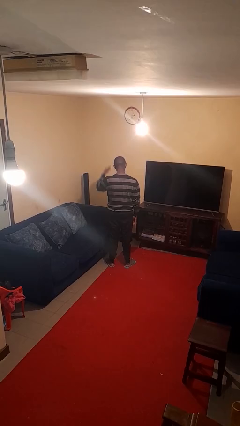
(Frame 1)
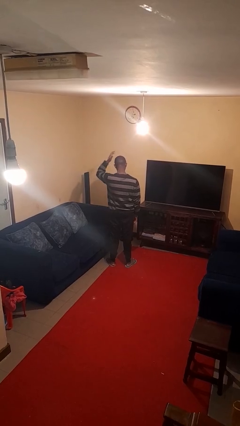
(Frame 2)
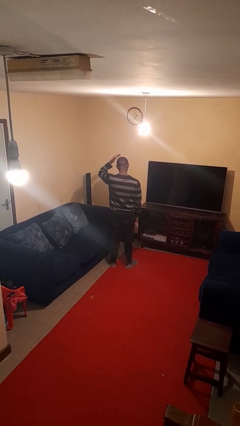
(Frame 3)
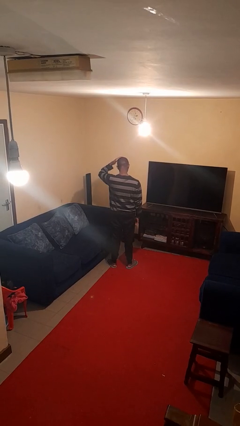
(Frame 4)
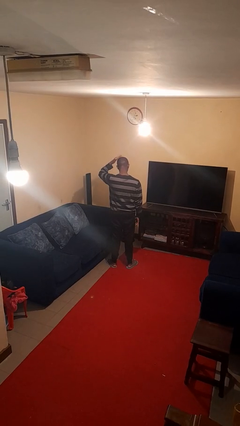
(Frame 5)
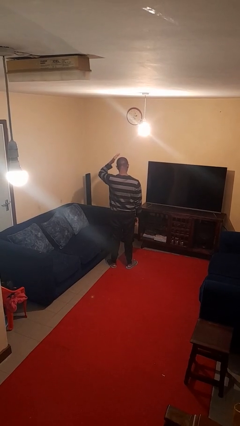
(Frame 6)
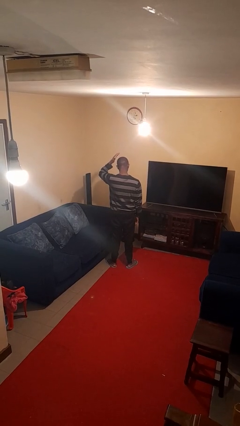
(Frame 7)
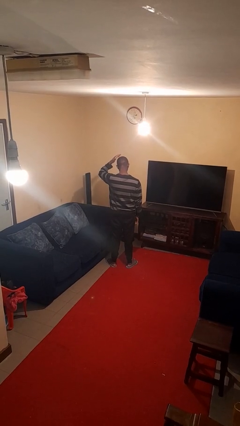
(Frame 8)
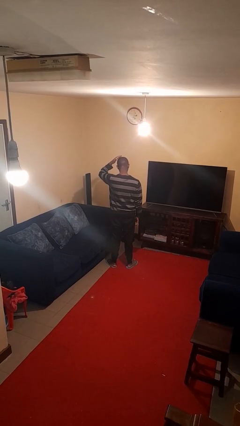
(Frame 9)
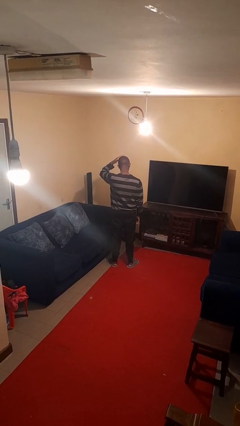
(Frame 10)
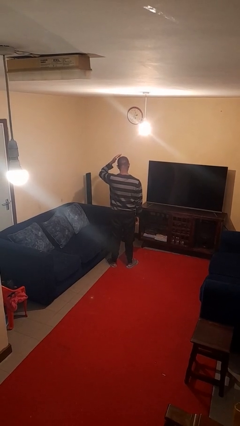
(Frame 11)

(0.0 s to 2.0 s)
person pats head

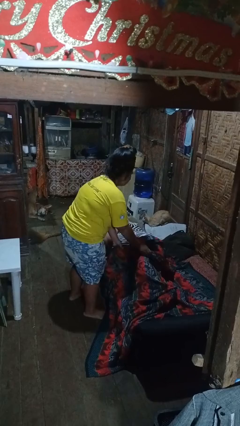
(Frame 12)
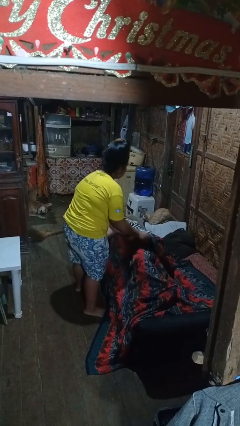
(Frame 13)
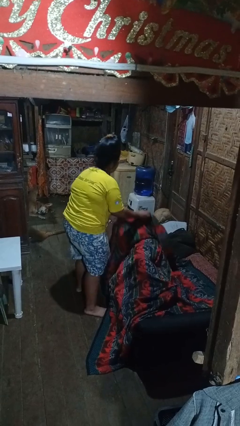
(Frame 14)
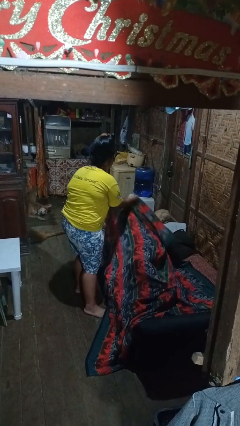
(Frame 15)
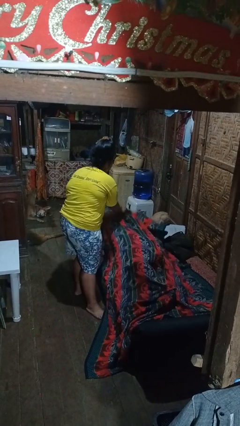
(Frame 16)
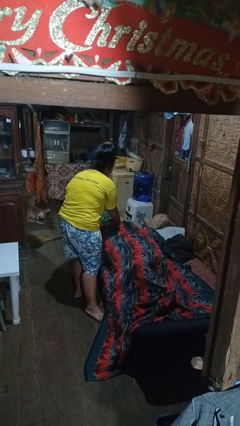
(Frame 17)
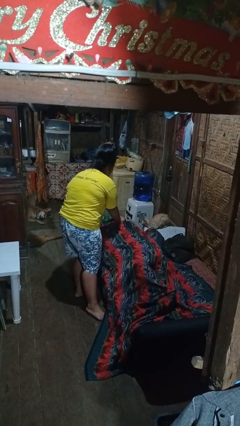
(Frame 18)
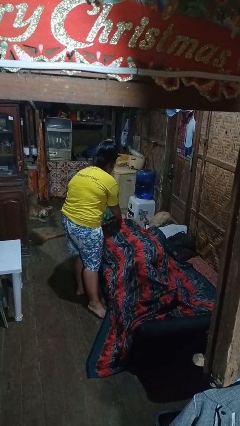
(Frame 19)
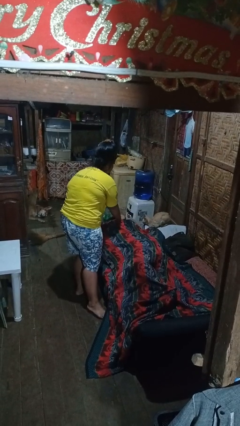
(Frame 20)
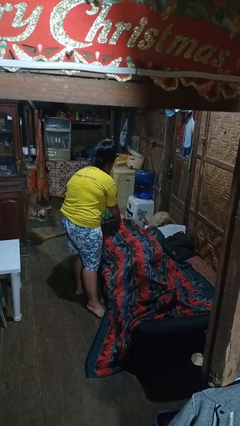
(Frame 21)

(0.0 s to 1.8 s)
person covers friend with blanket

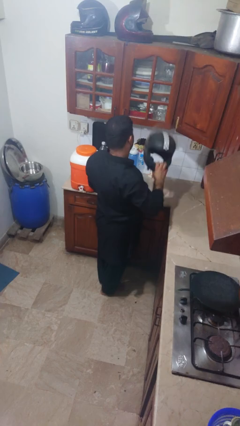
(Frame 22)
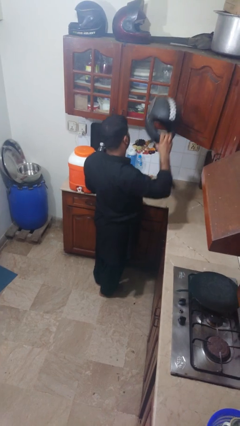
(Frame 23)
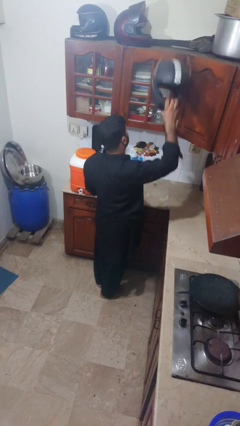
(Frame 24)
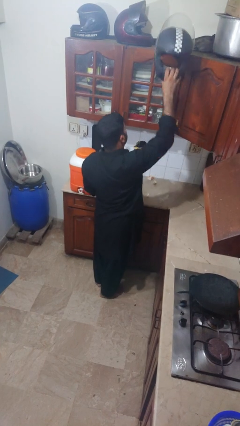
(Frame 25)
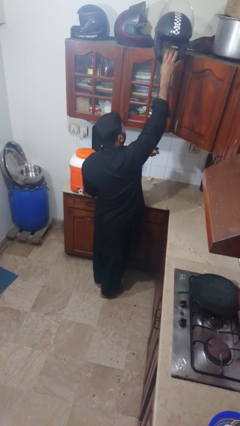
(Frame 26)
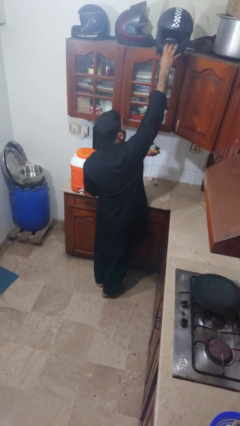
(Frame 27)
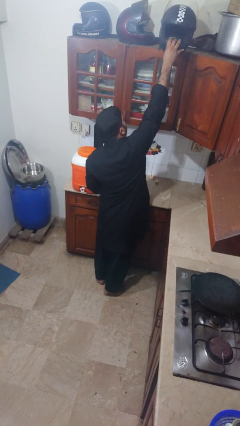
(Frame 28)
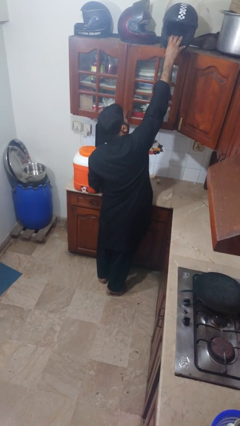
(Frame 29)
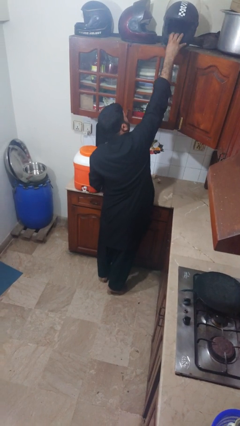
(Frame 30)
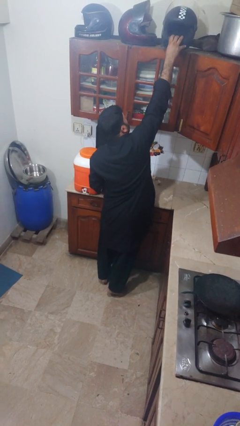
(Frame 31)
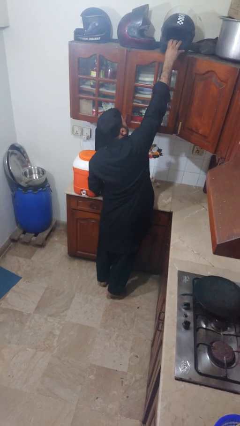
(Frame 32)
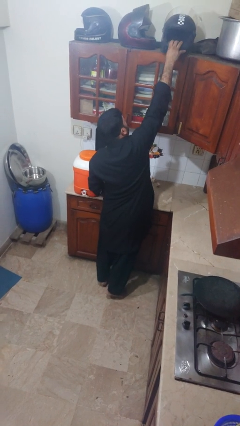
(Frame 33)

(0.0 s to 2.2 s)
person puts down object on shelf

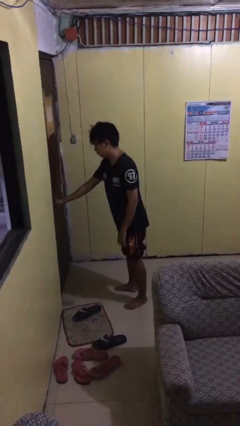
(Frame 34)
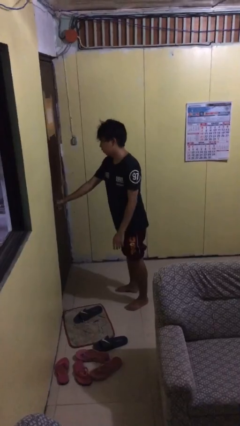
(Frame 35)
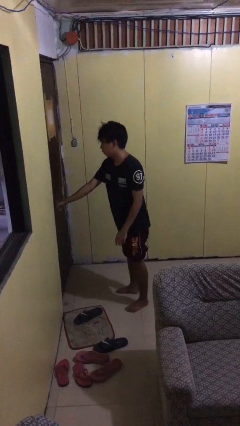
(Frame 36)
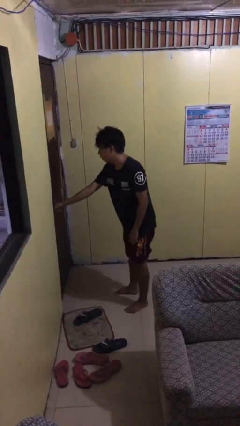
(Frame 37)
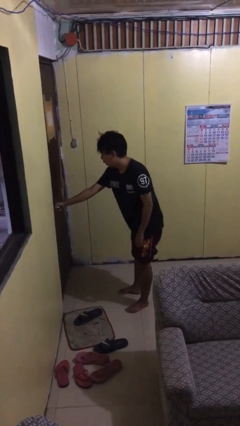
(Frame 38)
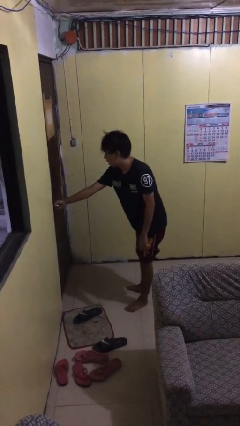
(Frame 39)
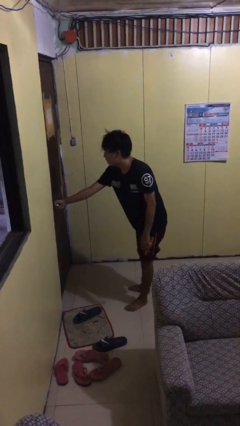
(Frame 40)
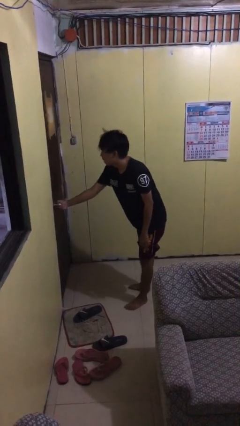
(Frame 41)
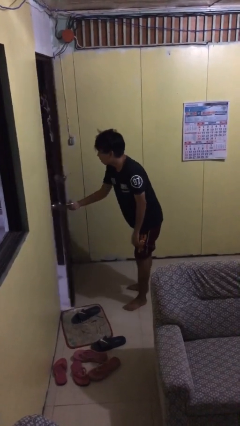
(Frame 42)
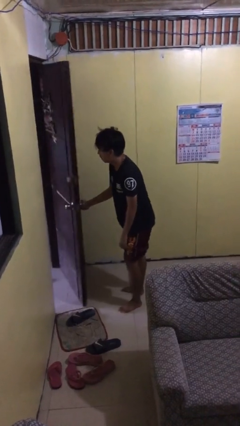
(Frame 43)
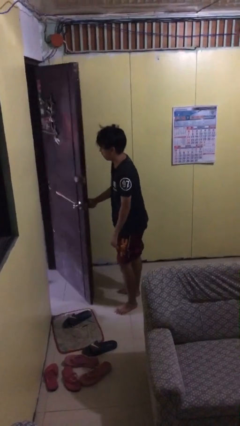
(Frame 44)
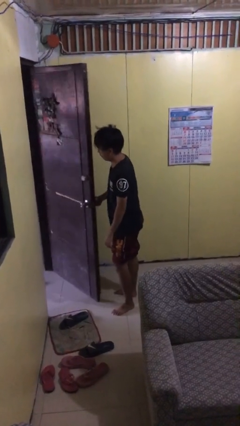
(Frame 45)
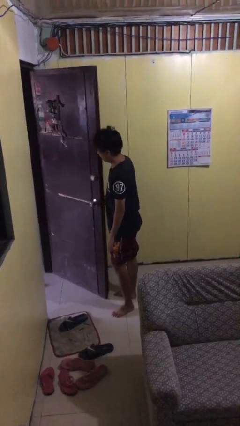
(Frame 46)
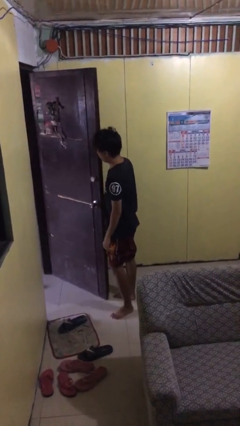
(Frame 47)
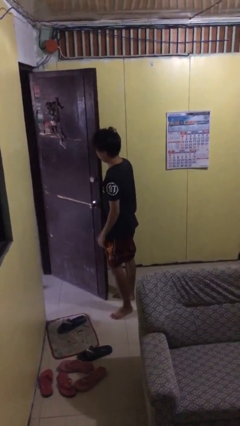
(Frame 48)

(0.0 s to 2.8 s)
person opens facility door

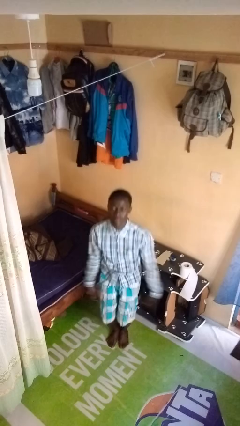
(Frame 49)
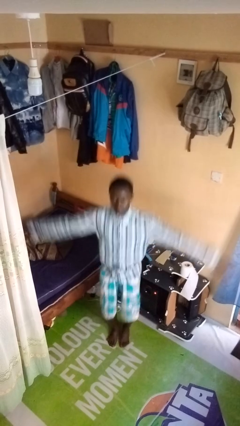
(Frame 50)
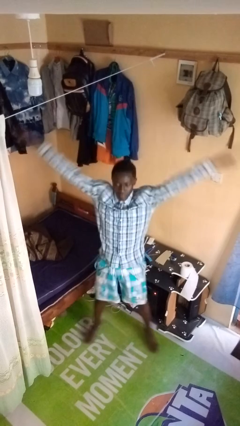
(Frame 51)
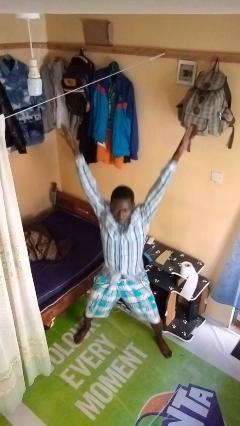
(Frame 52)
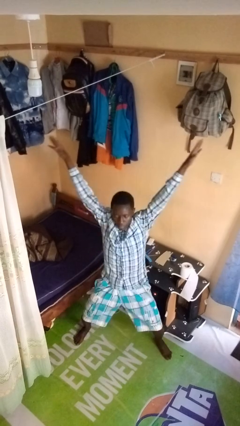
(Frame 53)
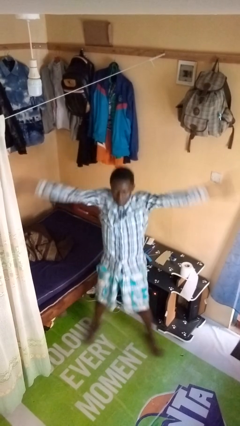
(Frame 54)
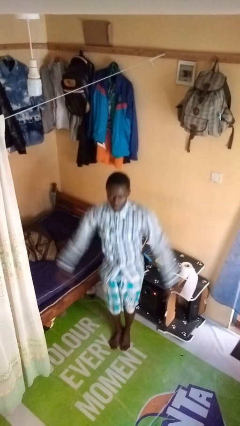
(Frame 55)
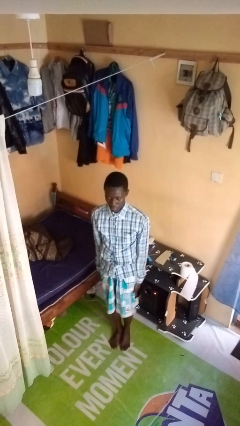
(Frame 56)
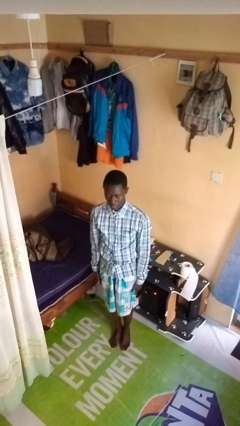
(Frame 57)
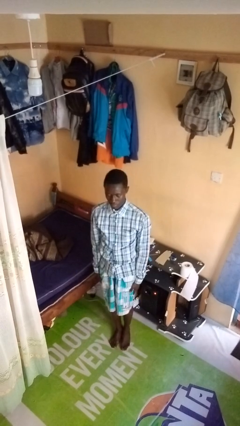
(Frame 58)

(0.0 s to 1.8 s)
person exercises with jumping jacks

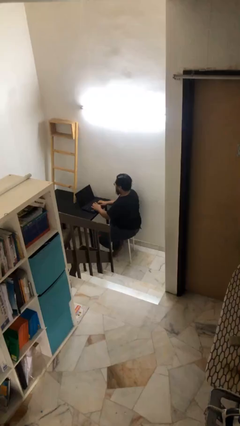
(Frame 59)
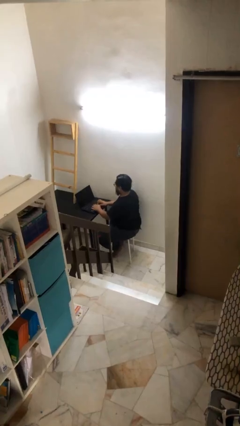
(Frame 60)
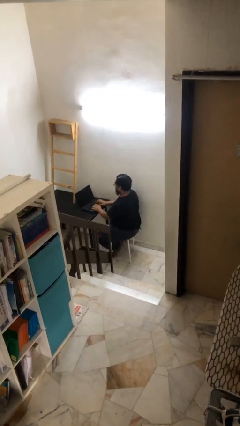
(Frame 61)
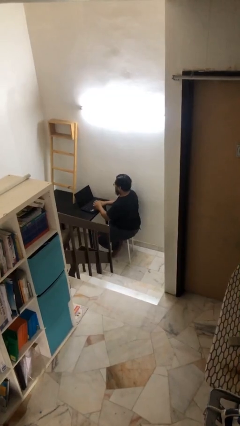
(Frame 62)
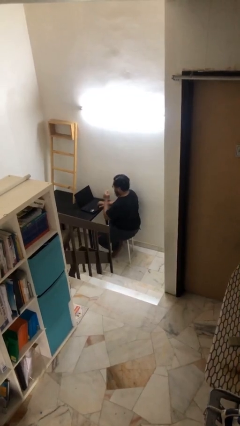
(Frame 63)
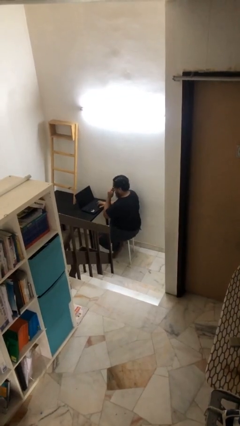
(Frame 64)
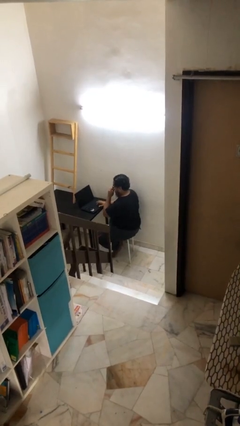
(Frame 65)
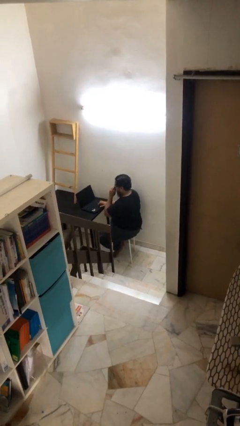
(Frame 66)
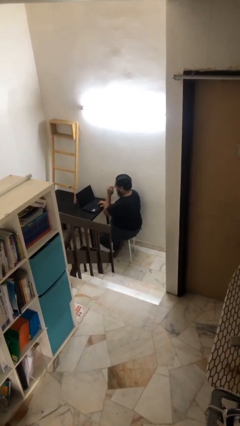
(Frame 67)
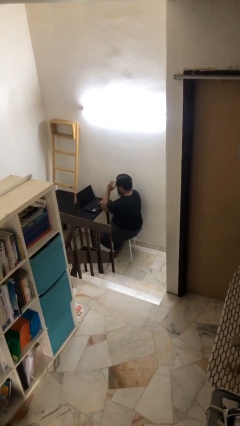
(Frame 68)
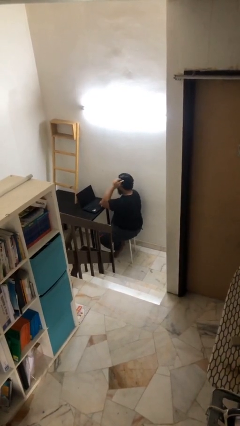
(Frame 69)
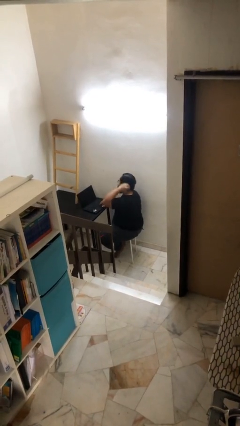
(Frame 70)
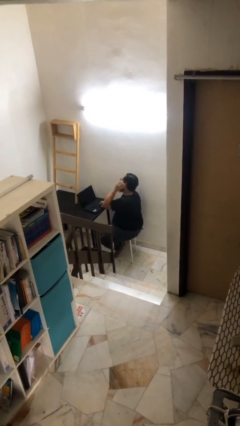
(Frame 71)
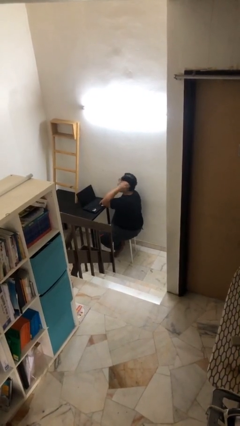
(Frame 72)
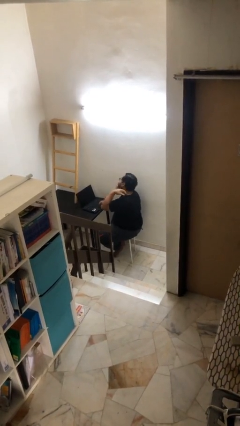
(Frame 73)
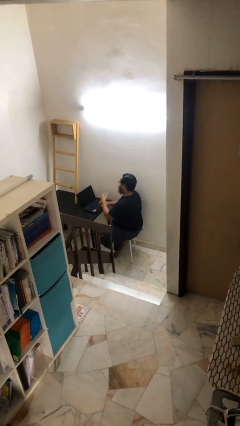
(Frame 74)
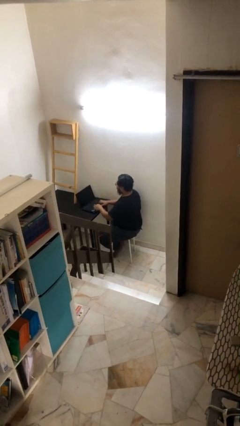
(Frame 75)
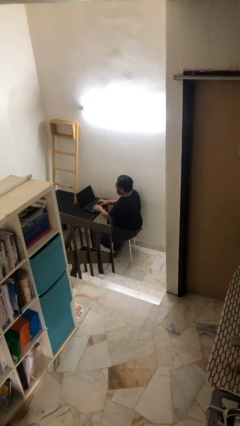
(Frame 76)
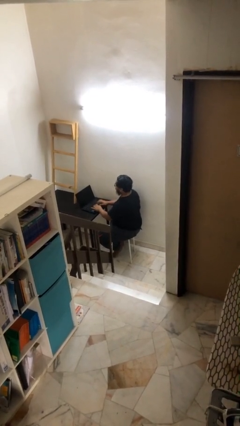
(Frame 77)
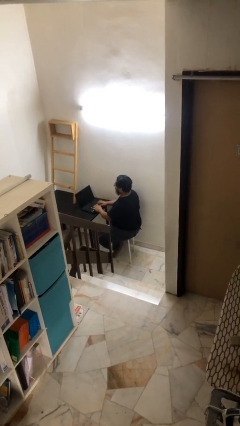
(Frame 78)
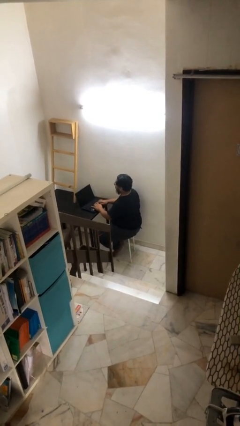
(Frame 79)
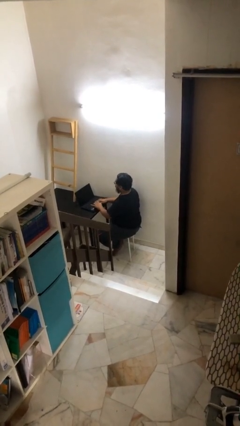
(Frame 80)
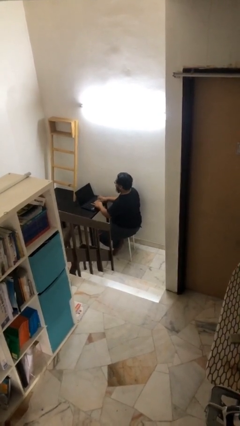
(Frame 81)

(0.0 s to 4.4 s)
person interacts with laptop

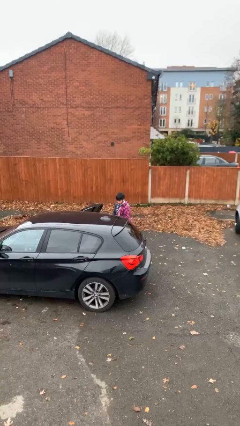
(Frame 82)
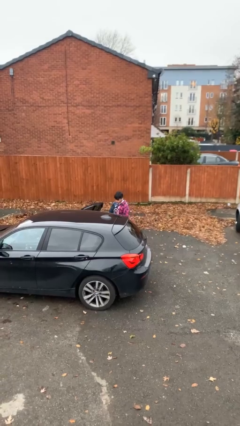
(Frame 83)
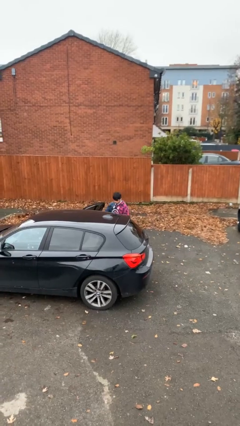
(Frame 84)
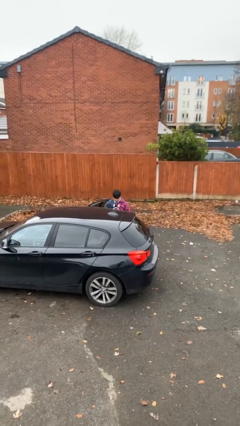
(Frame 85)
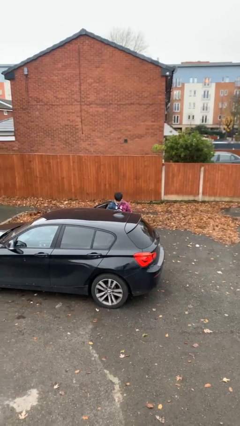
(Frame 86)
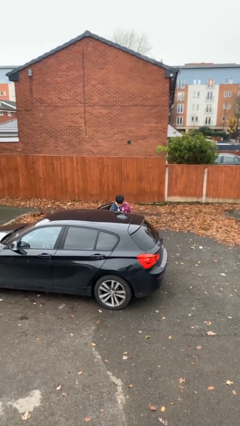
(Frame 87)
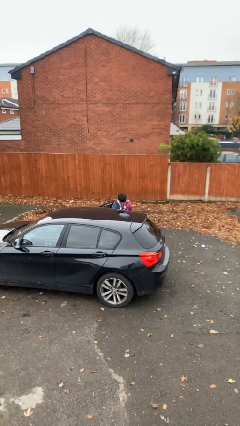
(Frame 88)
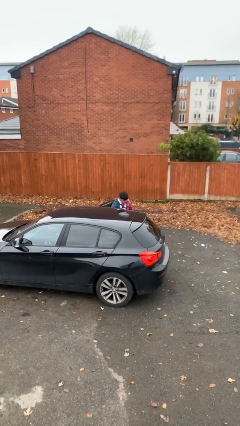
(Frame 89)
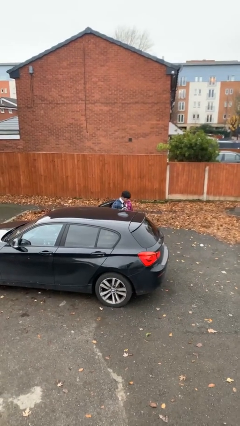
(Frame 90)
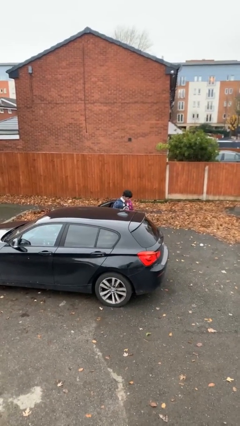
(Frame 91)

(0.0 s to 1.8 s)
person loads car
